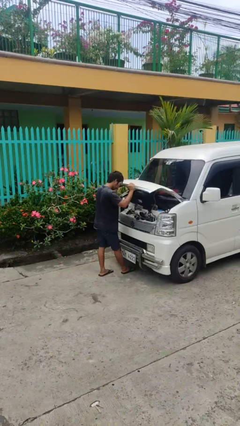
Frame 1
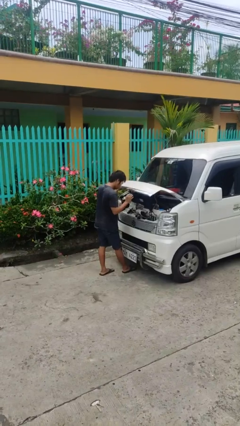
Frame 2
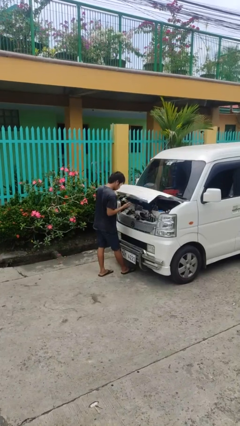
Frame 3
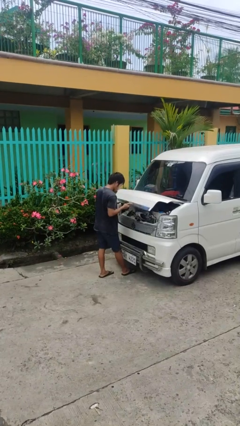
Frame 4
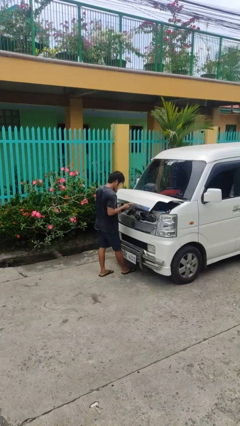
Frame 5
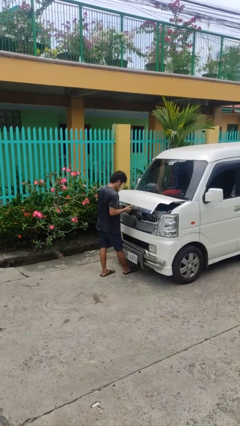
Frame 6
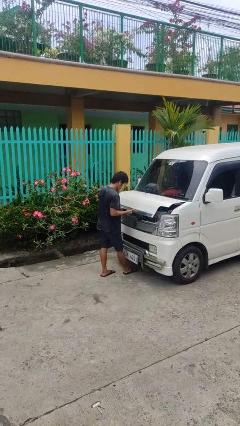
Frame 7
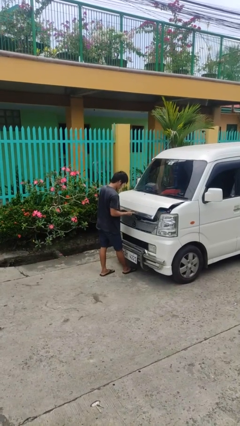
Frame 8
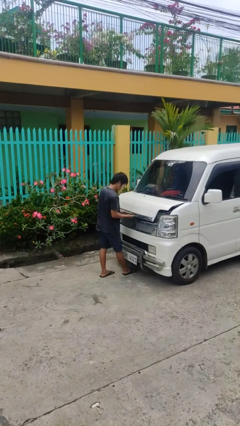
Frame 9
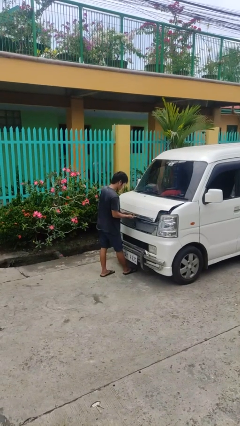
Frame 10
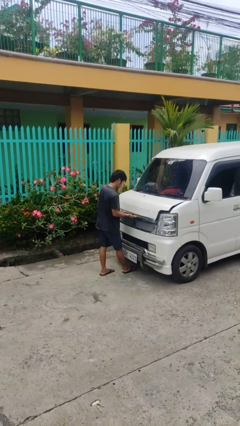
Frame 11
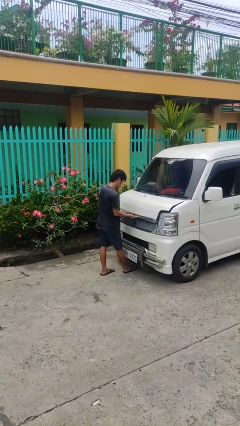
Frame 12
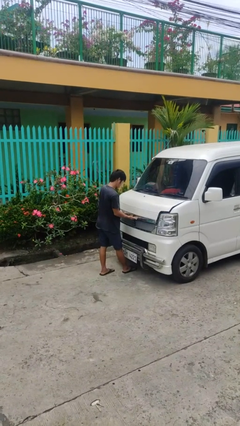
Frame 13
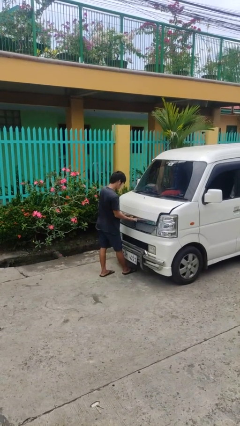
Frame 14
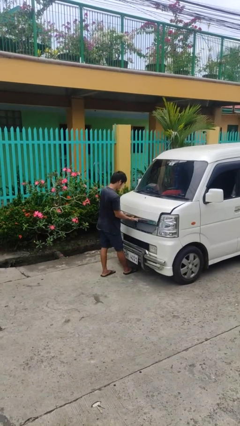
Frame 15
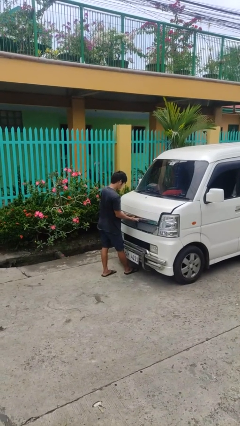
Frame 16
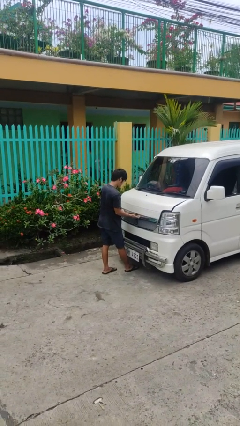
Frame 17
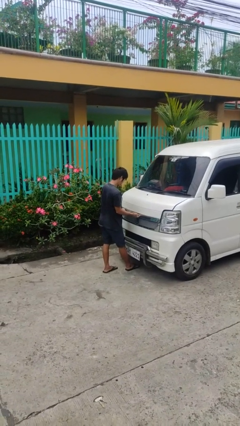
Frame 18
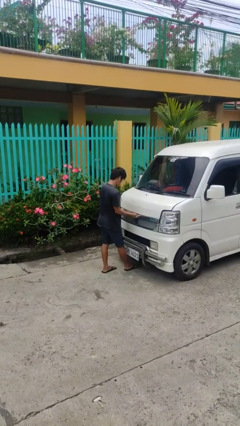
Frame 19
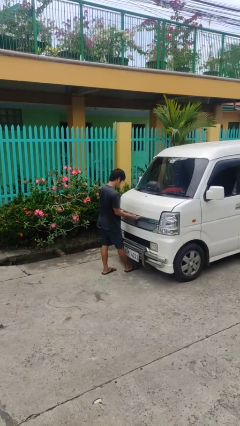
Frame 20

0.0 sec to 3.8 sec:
person closes car hood

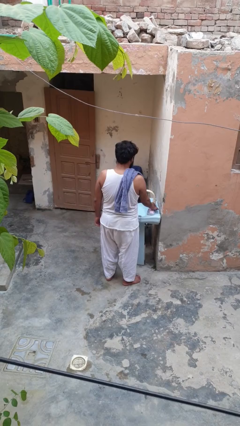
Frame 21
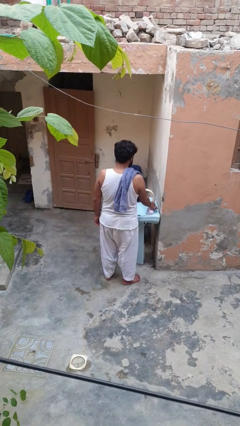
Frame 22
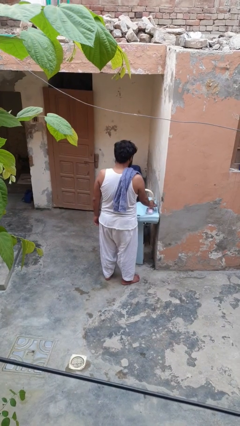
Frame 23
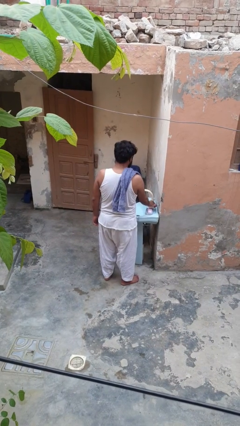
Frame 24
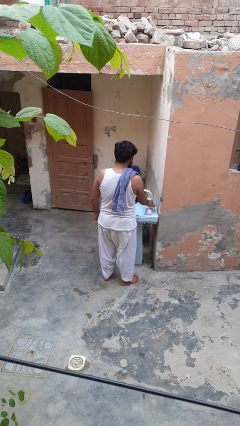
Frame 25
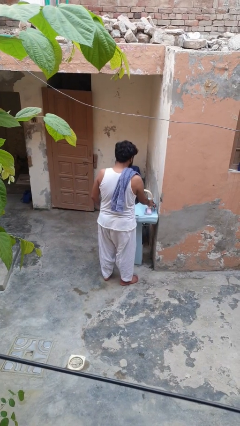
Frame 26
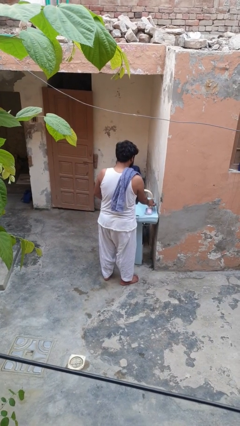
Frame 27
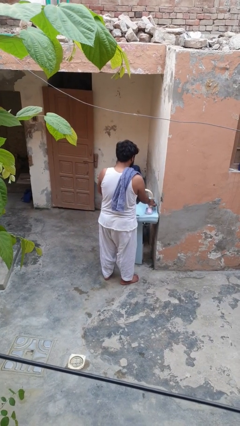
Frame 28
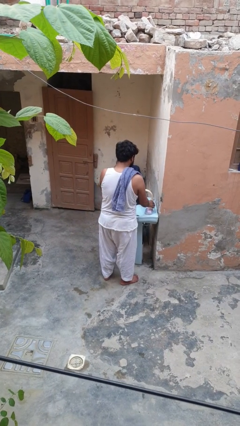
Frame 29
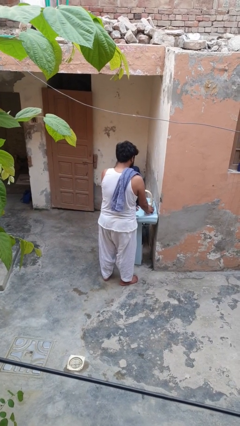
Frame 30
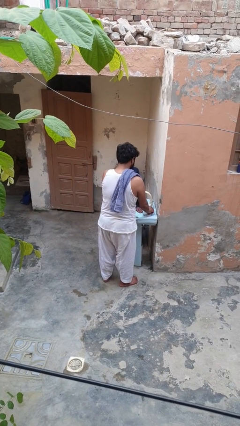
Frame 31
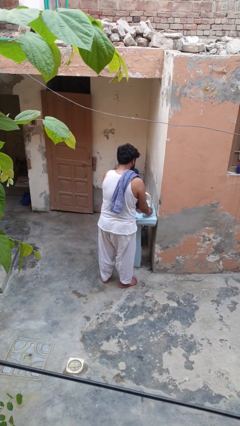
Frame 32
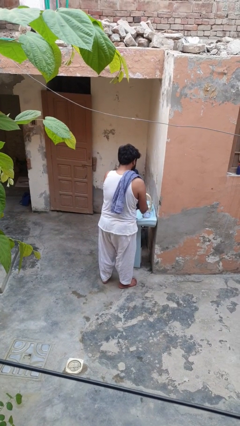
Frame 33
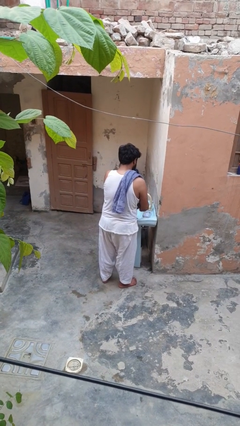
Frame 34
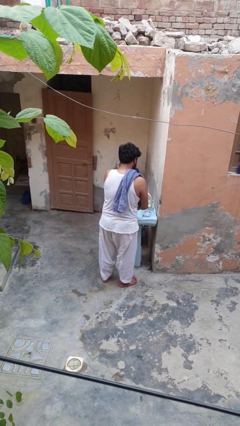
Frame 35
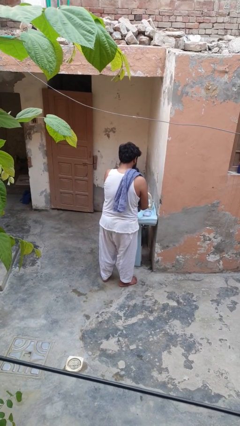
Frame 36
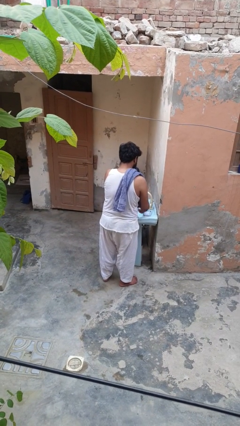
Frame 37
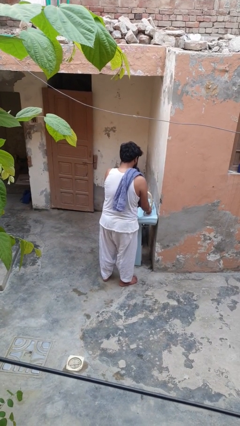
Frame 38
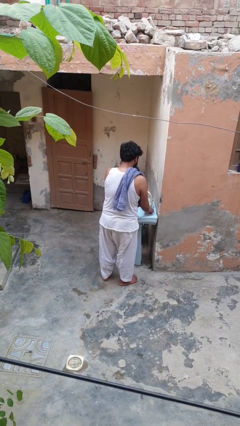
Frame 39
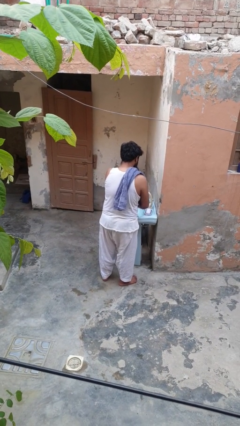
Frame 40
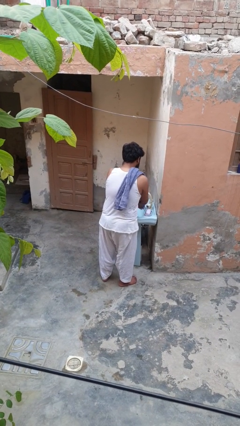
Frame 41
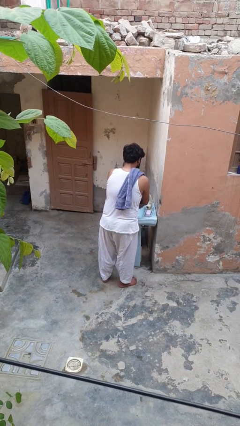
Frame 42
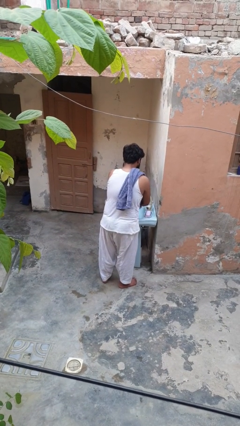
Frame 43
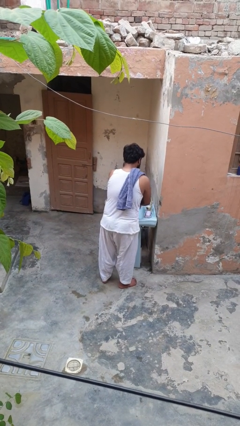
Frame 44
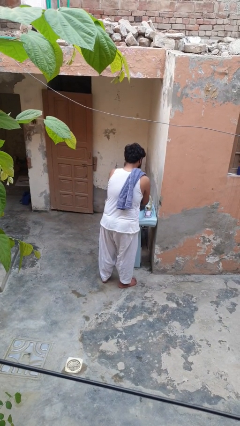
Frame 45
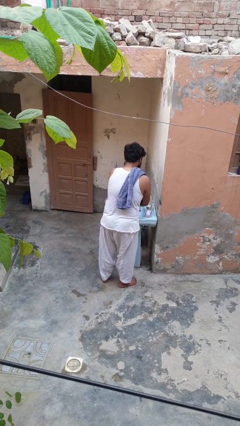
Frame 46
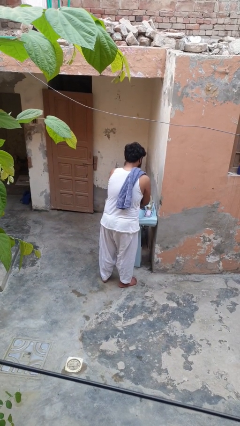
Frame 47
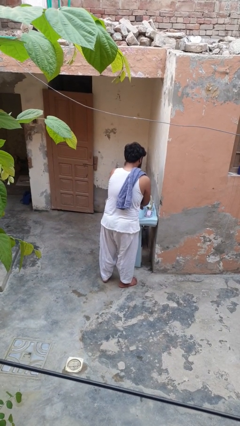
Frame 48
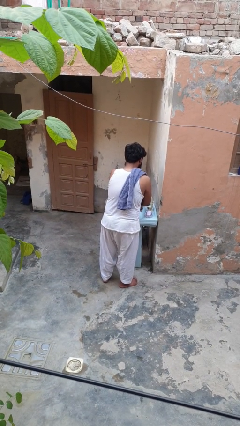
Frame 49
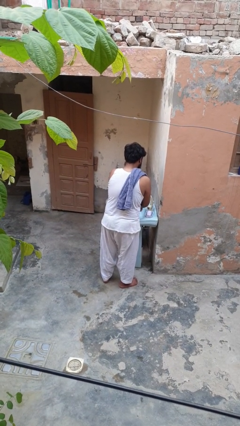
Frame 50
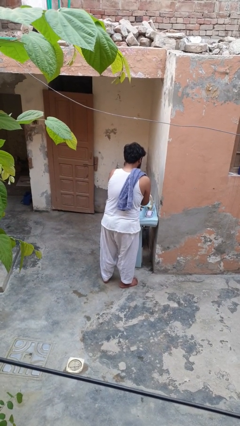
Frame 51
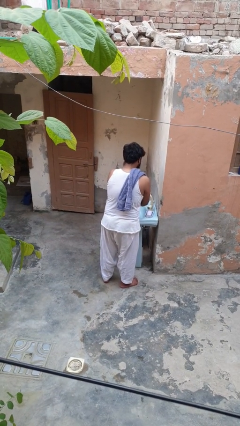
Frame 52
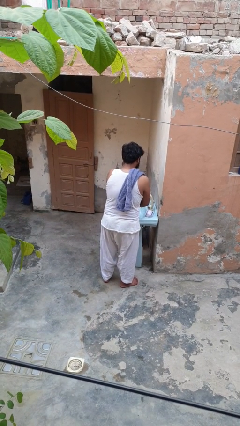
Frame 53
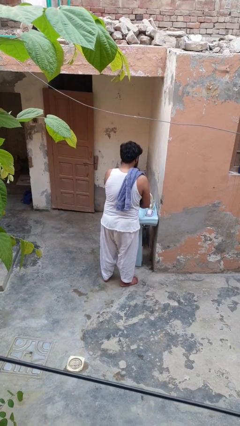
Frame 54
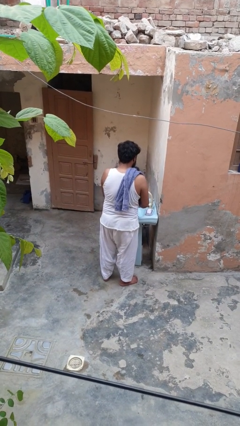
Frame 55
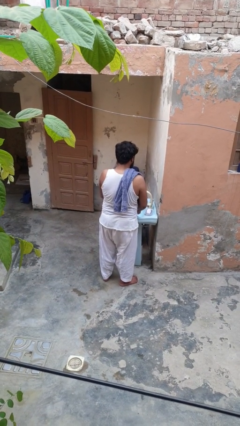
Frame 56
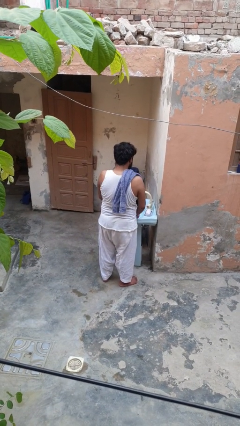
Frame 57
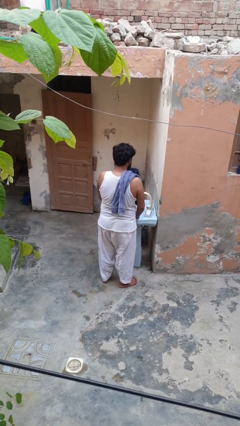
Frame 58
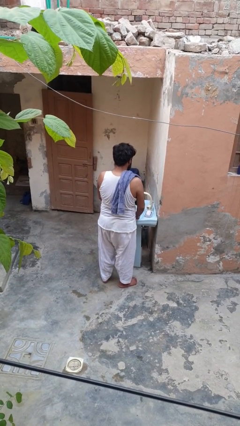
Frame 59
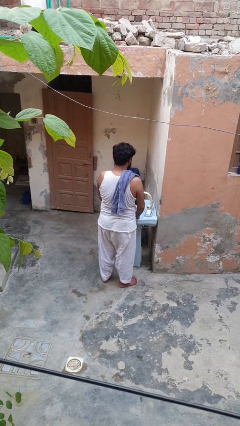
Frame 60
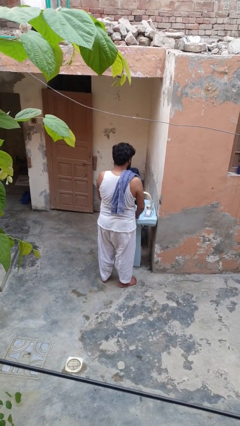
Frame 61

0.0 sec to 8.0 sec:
person washes hands

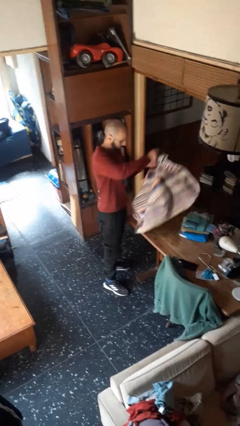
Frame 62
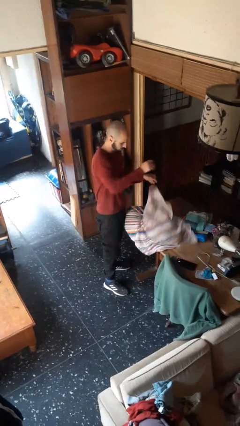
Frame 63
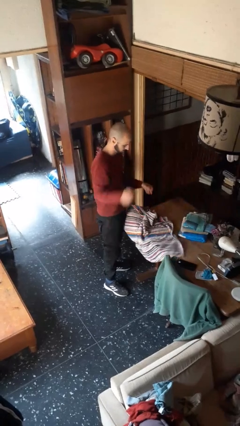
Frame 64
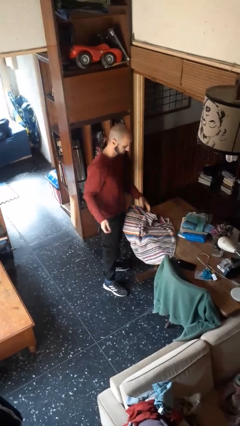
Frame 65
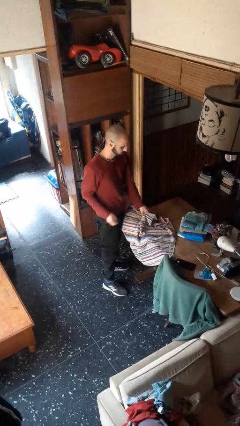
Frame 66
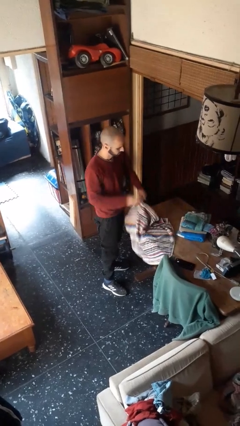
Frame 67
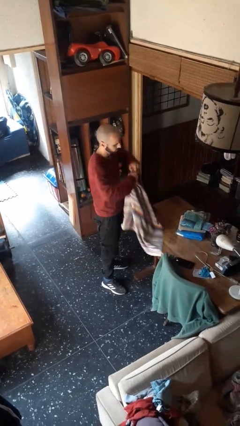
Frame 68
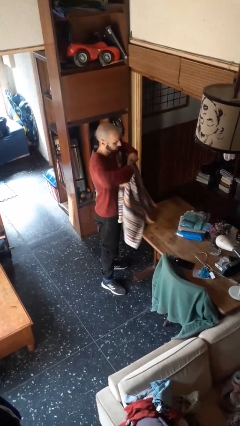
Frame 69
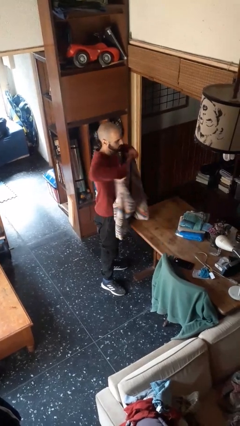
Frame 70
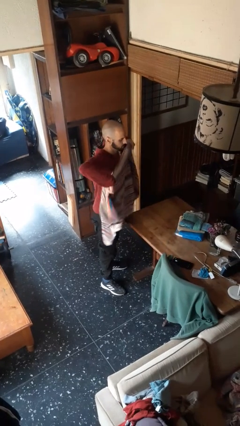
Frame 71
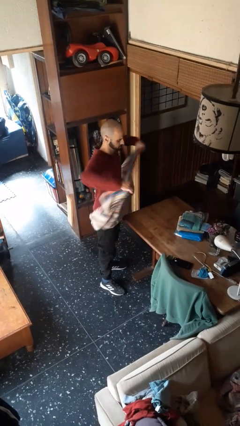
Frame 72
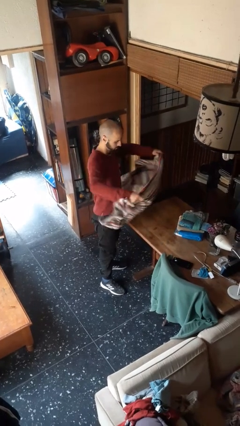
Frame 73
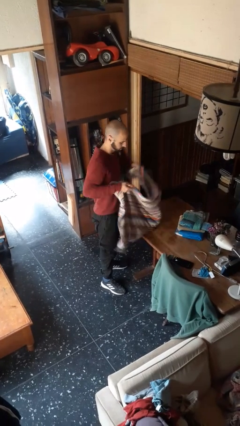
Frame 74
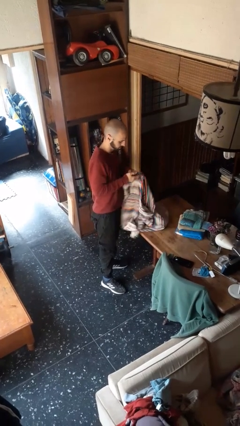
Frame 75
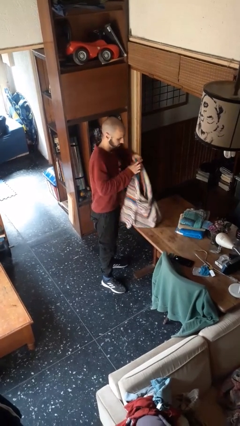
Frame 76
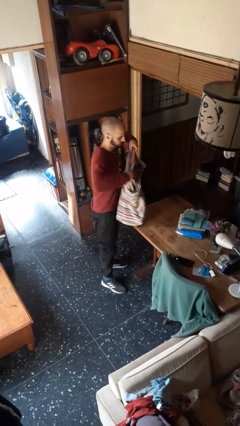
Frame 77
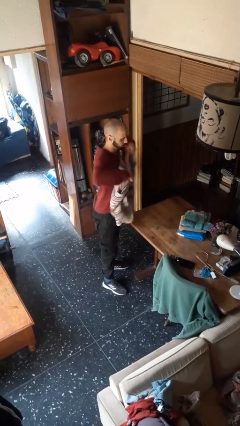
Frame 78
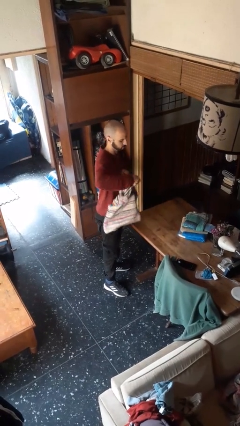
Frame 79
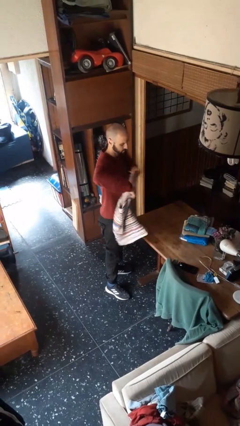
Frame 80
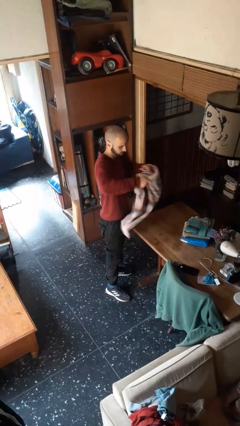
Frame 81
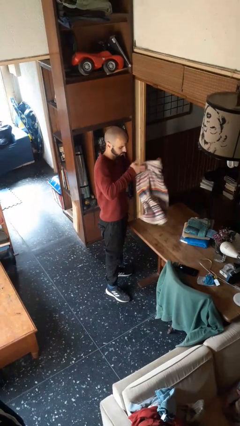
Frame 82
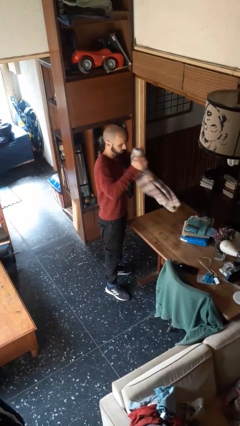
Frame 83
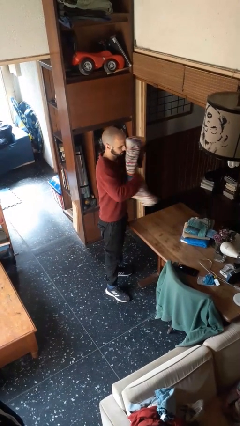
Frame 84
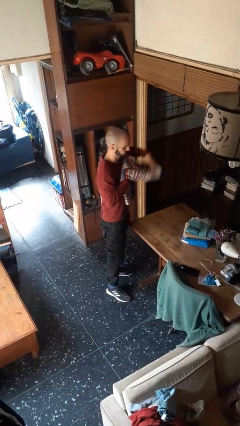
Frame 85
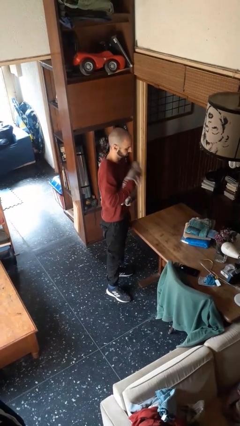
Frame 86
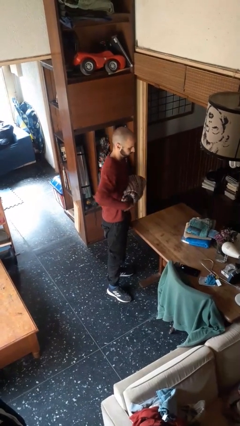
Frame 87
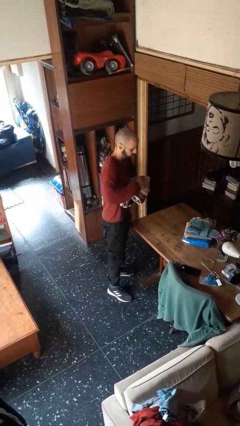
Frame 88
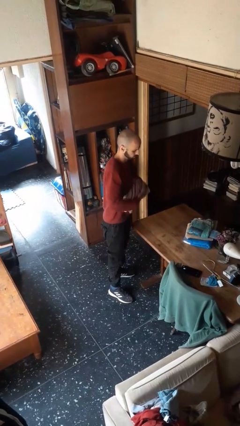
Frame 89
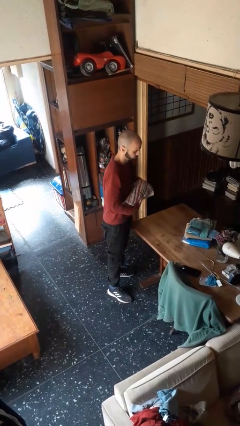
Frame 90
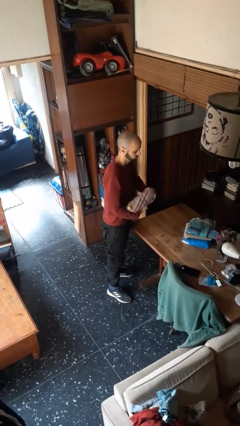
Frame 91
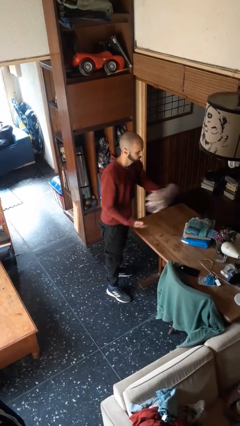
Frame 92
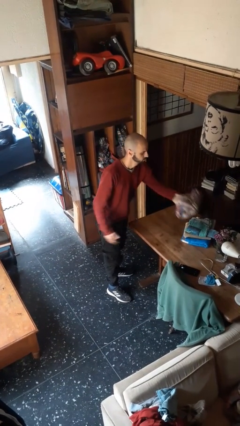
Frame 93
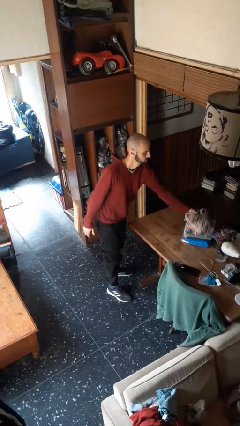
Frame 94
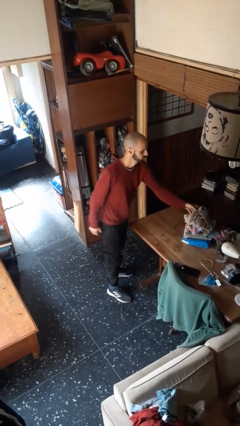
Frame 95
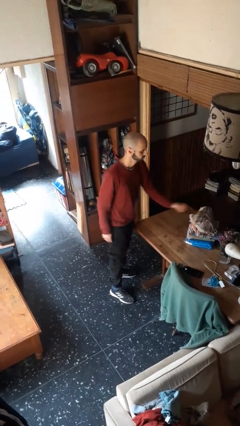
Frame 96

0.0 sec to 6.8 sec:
person folds towel
